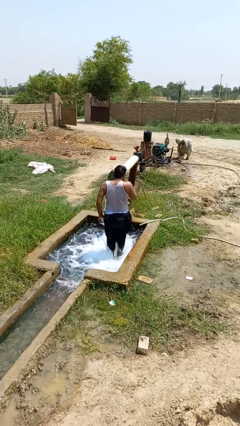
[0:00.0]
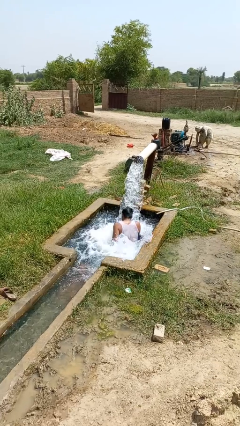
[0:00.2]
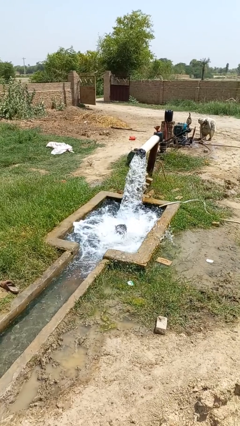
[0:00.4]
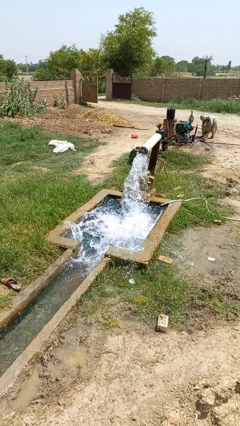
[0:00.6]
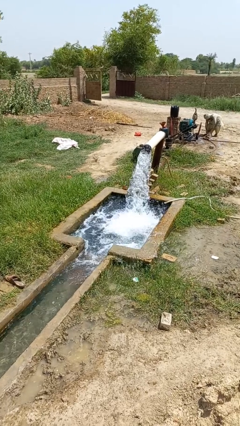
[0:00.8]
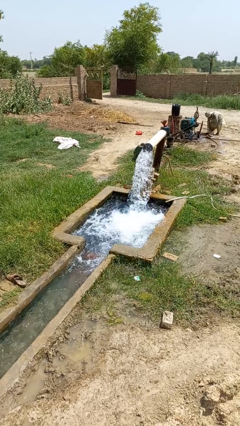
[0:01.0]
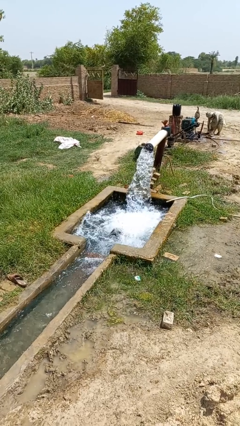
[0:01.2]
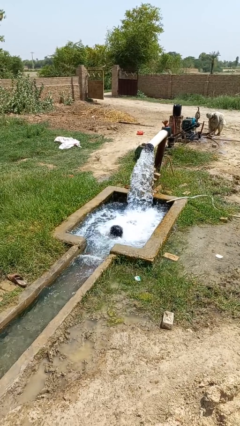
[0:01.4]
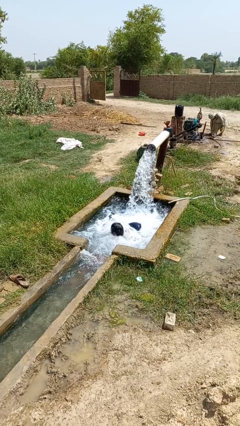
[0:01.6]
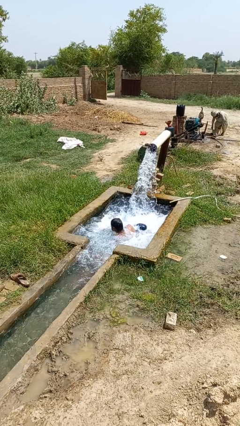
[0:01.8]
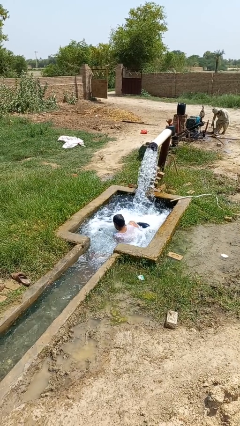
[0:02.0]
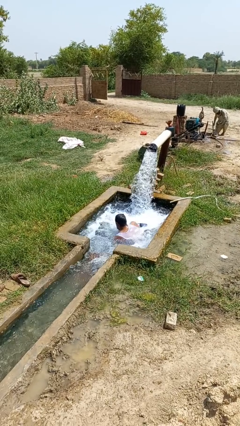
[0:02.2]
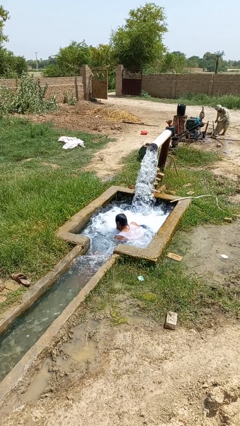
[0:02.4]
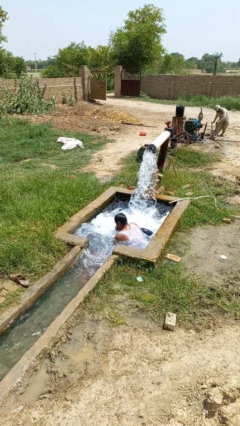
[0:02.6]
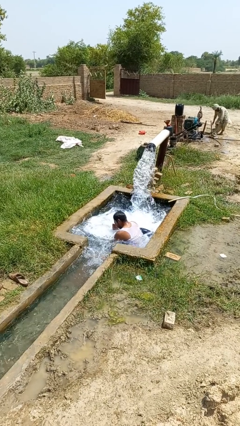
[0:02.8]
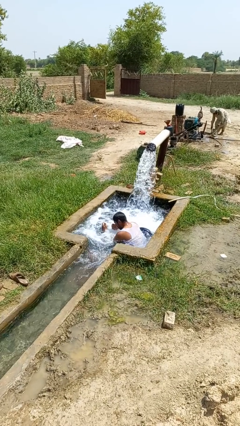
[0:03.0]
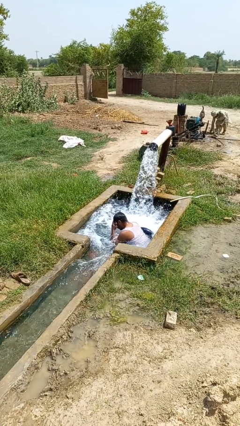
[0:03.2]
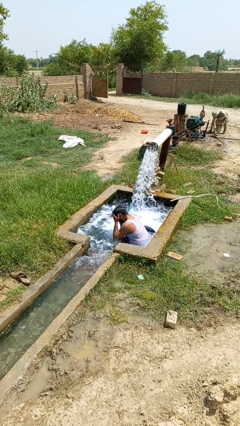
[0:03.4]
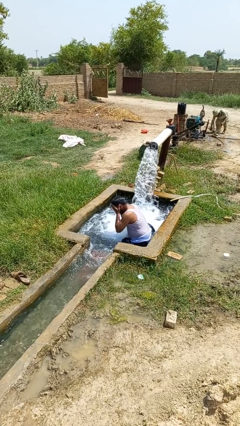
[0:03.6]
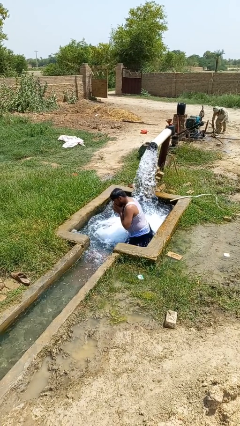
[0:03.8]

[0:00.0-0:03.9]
person falls into pool

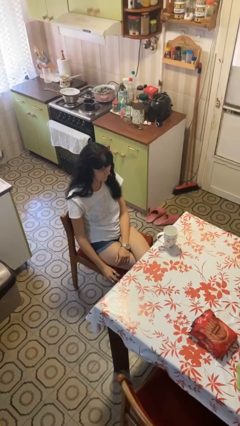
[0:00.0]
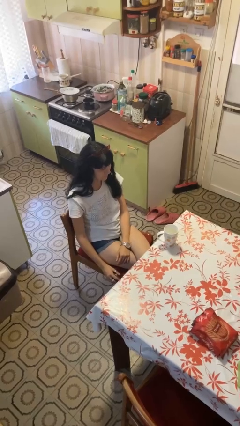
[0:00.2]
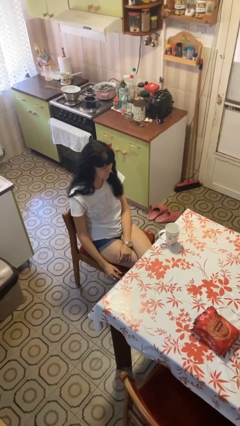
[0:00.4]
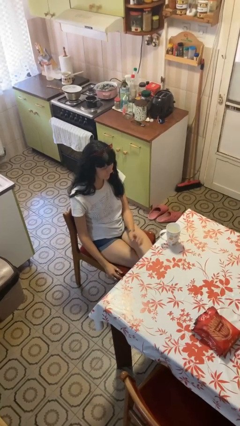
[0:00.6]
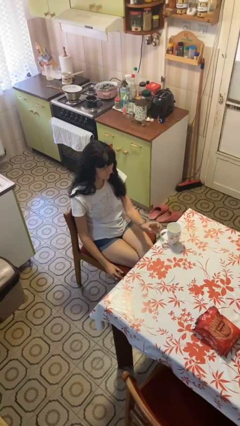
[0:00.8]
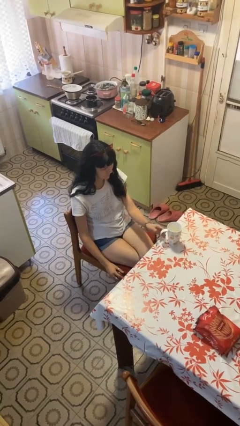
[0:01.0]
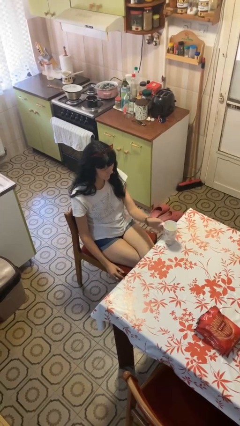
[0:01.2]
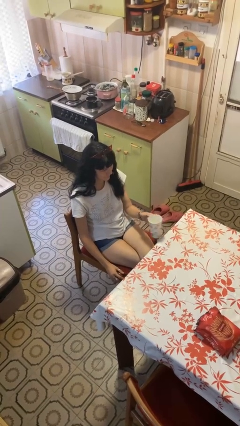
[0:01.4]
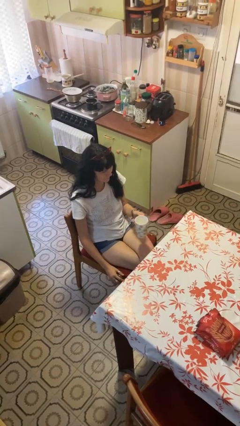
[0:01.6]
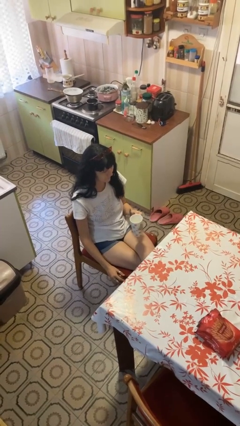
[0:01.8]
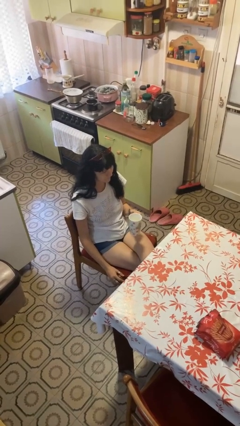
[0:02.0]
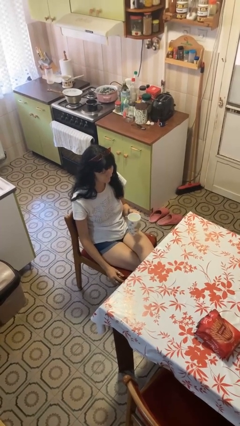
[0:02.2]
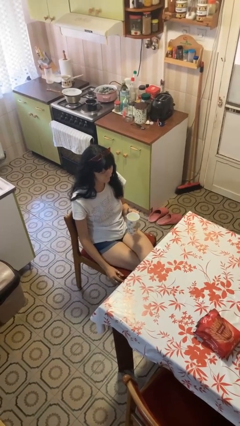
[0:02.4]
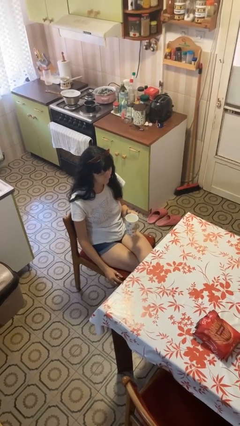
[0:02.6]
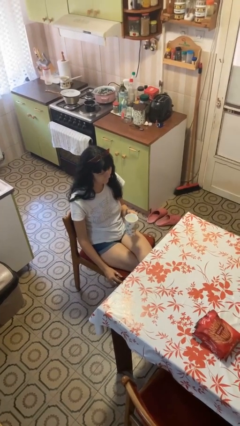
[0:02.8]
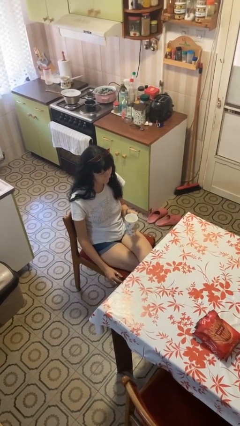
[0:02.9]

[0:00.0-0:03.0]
person picks up object from table

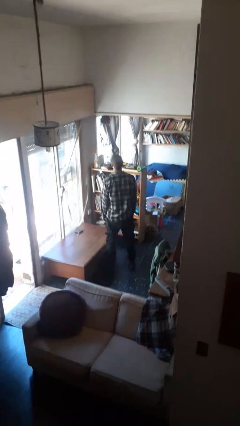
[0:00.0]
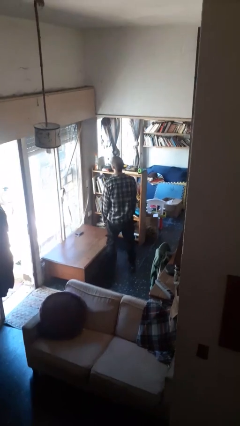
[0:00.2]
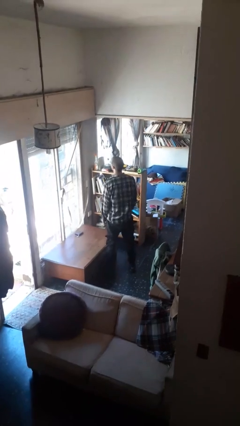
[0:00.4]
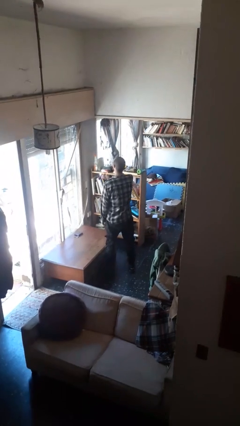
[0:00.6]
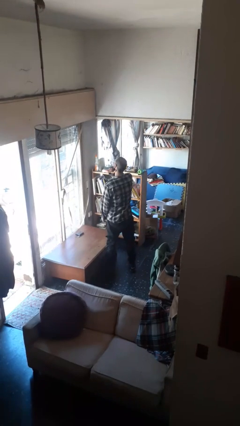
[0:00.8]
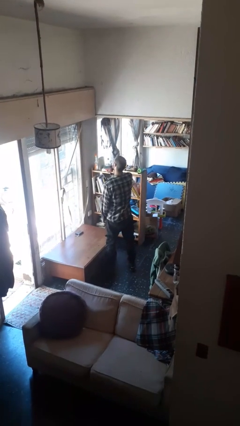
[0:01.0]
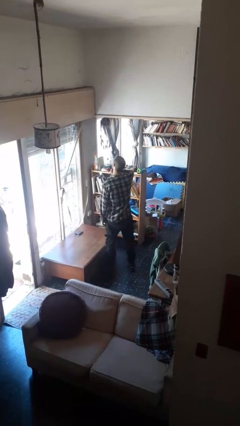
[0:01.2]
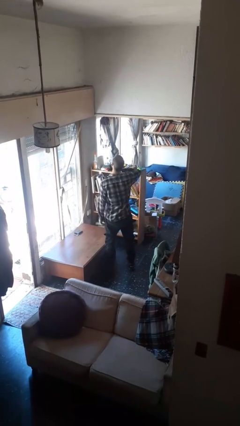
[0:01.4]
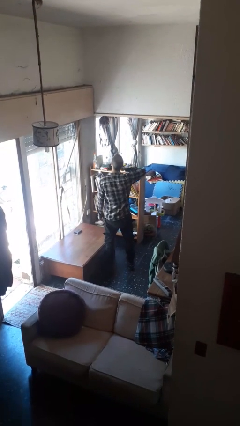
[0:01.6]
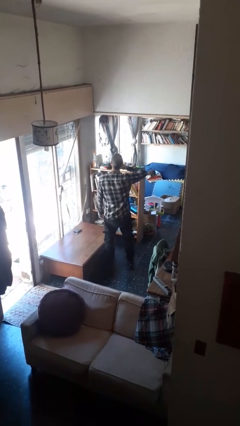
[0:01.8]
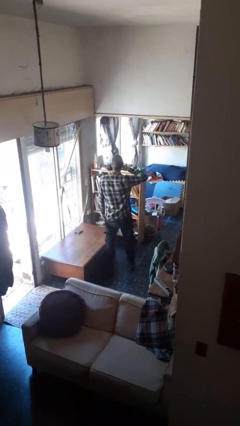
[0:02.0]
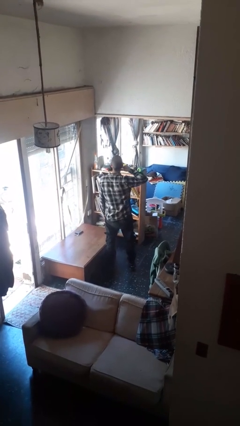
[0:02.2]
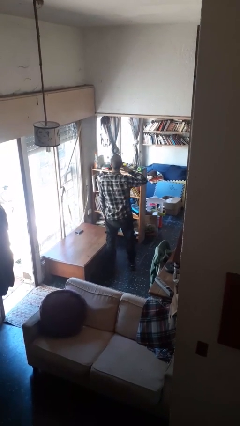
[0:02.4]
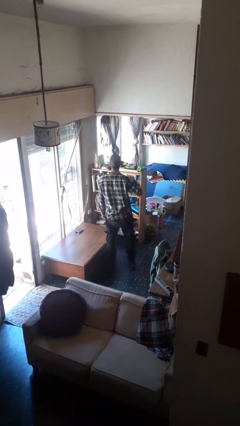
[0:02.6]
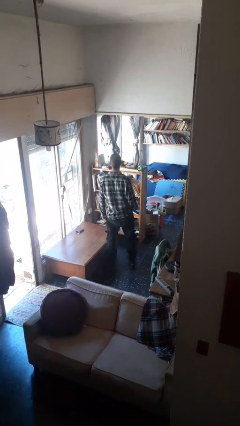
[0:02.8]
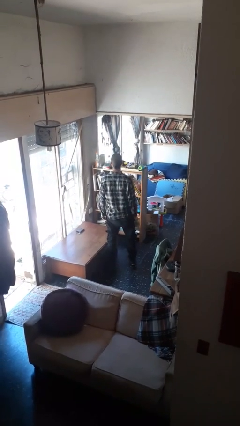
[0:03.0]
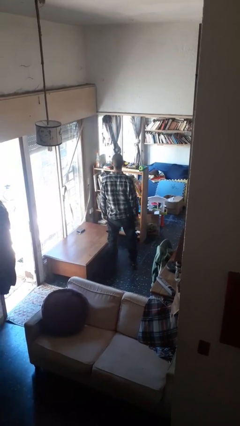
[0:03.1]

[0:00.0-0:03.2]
person gestures cut

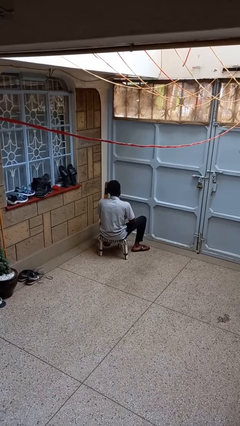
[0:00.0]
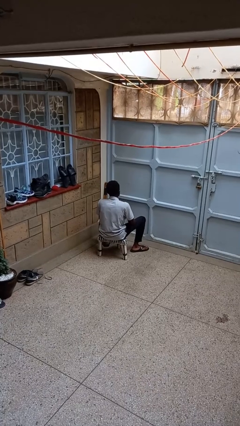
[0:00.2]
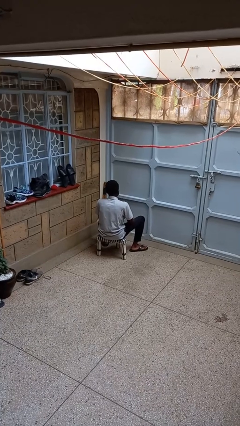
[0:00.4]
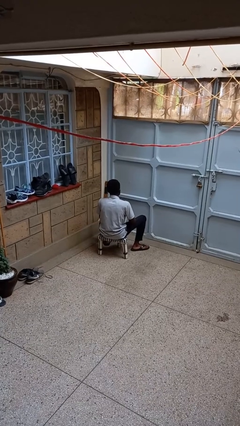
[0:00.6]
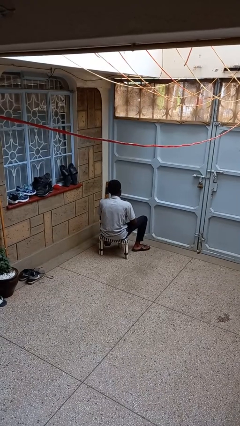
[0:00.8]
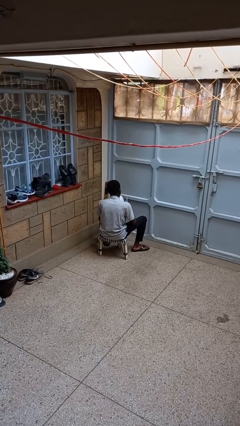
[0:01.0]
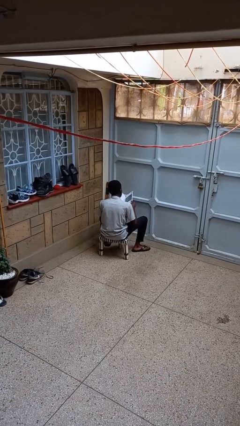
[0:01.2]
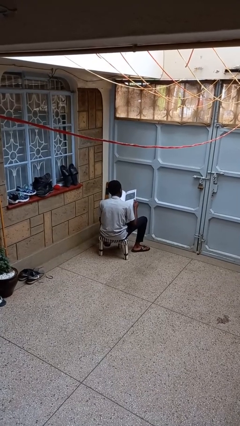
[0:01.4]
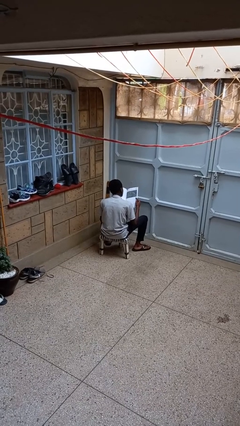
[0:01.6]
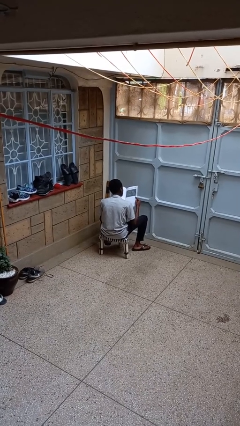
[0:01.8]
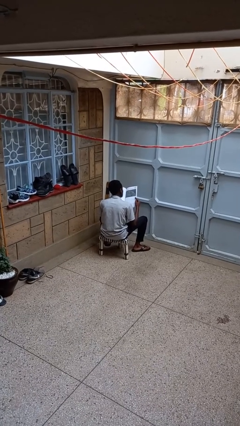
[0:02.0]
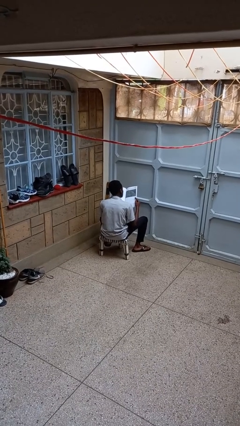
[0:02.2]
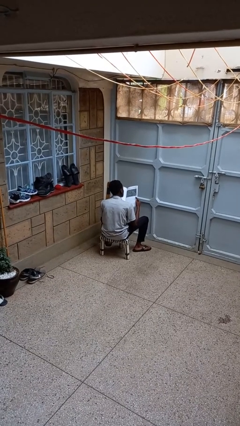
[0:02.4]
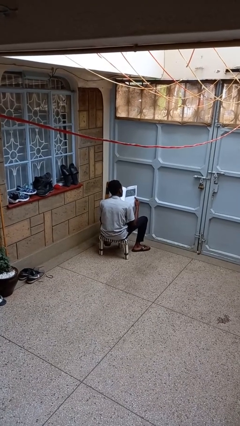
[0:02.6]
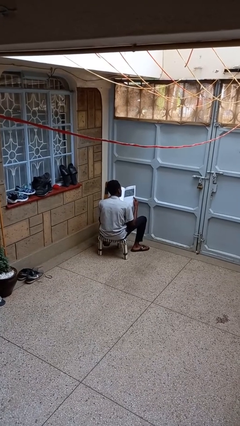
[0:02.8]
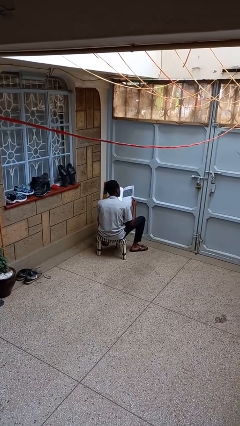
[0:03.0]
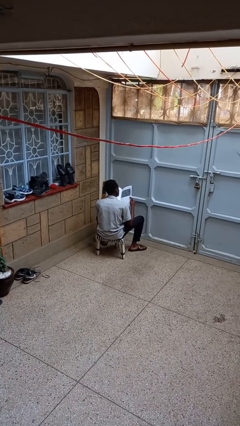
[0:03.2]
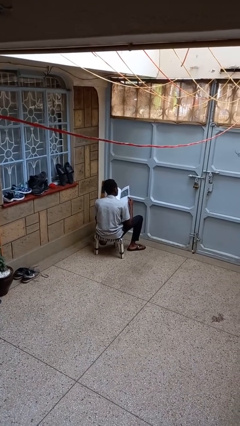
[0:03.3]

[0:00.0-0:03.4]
person reads magazine

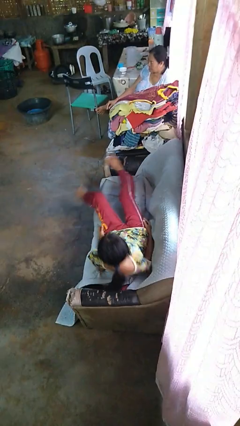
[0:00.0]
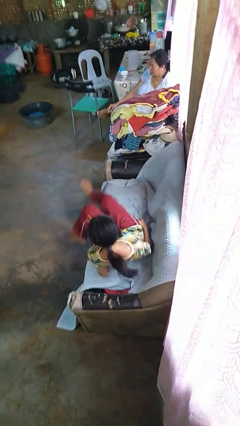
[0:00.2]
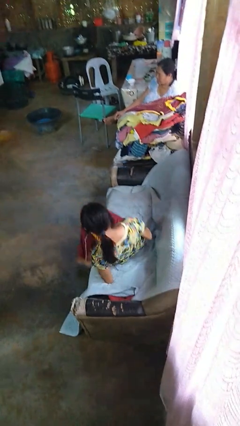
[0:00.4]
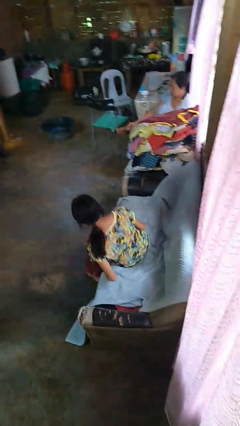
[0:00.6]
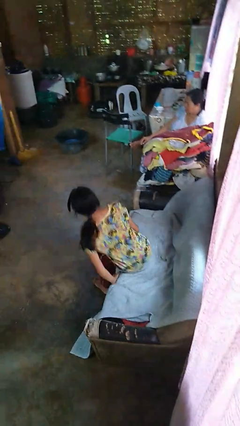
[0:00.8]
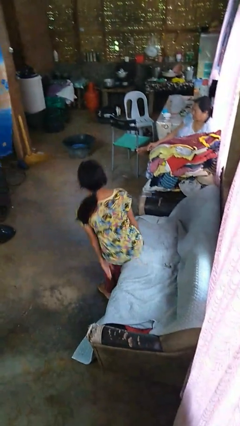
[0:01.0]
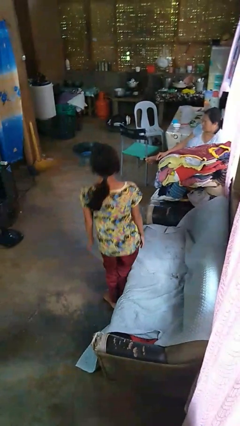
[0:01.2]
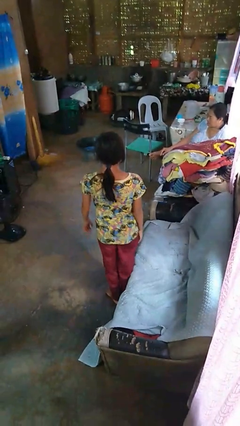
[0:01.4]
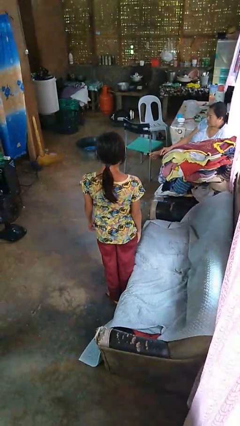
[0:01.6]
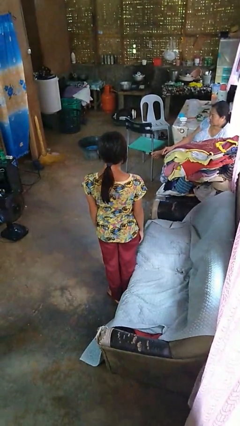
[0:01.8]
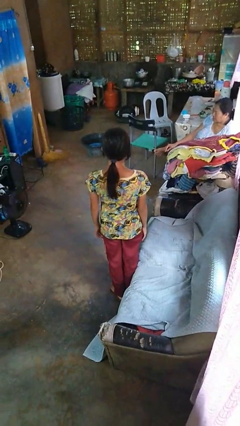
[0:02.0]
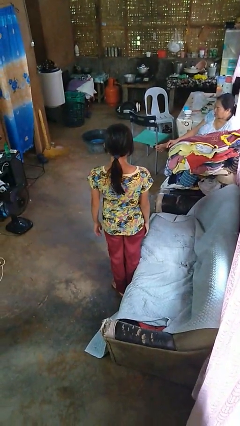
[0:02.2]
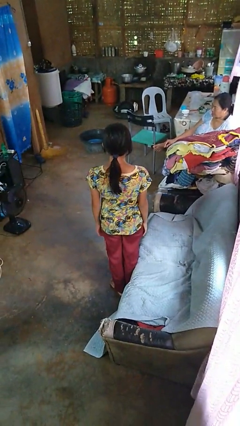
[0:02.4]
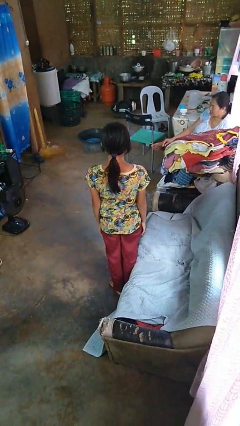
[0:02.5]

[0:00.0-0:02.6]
person stands up

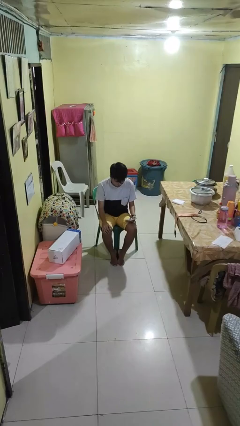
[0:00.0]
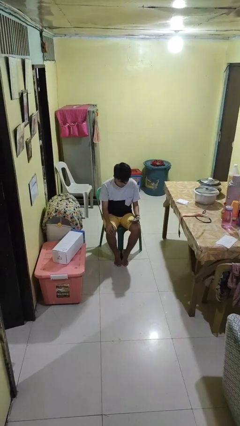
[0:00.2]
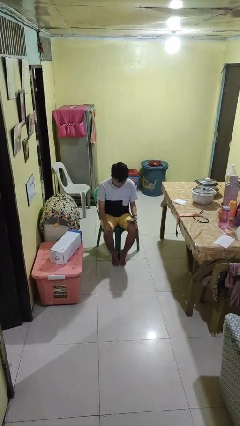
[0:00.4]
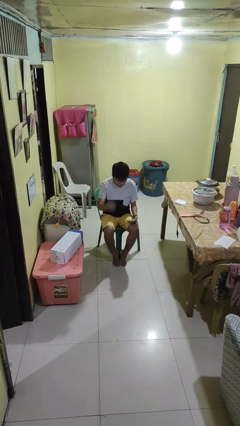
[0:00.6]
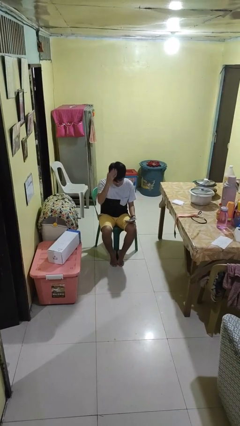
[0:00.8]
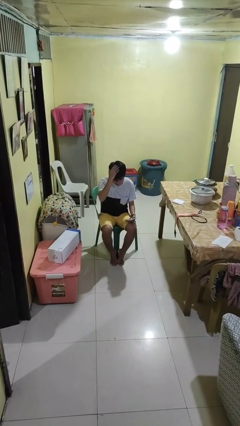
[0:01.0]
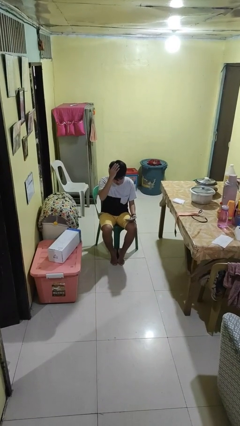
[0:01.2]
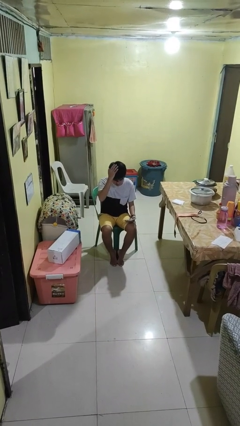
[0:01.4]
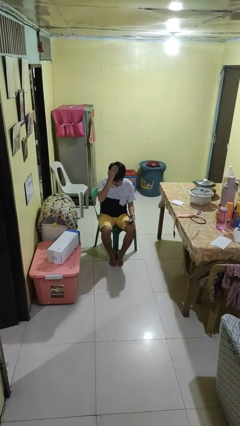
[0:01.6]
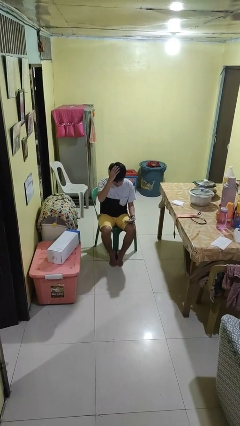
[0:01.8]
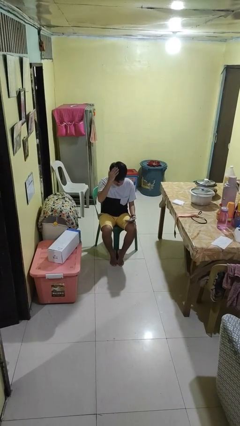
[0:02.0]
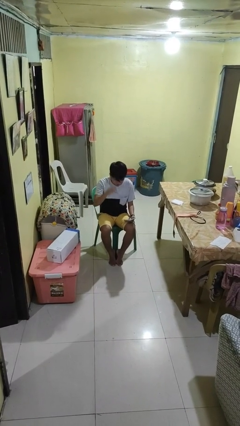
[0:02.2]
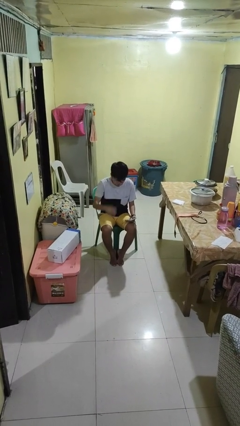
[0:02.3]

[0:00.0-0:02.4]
person pats head
